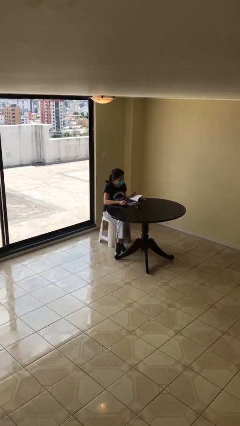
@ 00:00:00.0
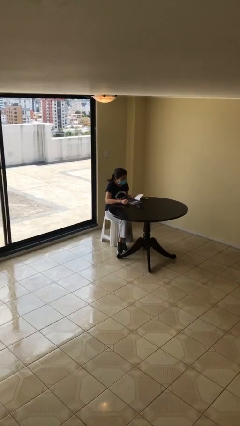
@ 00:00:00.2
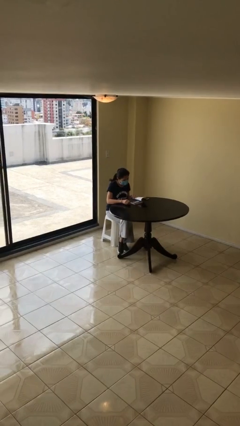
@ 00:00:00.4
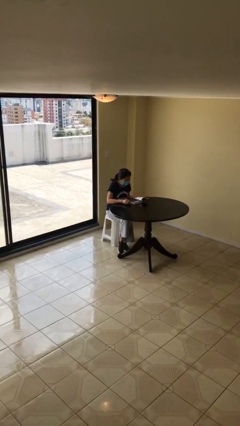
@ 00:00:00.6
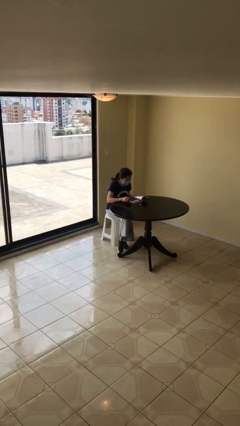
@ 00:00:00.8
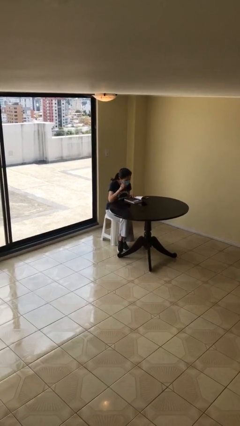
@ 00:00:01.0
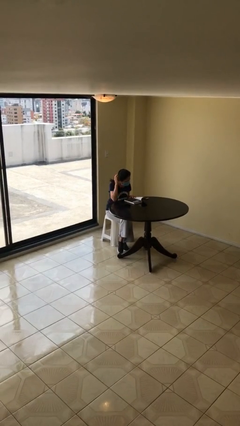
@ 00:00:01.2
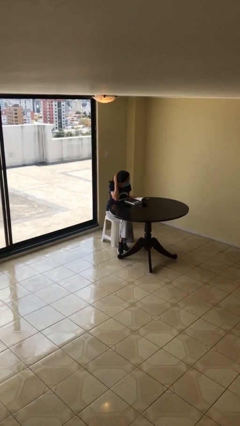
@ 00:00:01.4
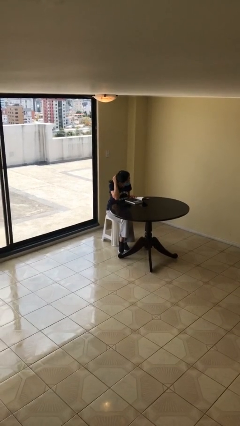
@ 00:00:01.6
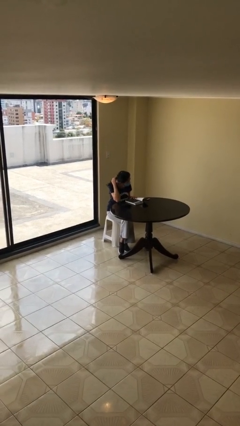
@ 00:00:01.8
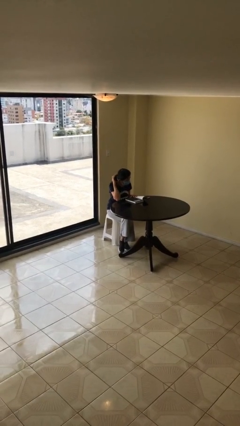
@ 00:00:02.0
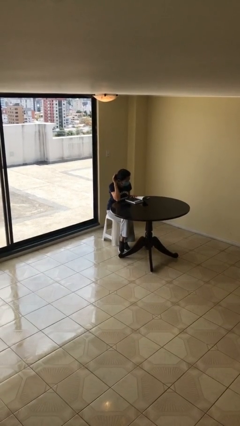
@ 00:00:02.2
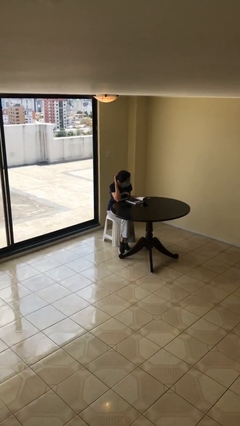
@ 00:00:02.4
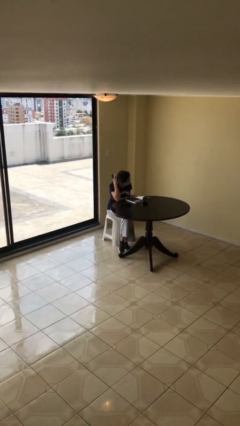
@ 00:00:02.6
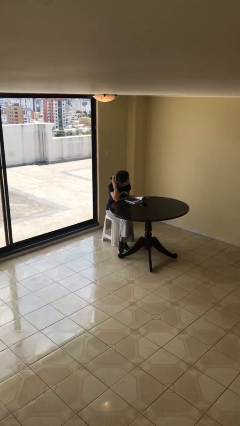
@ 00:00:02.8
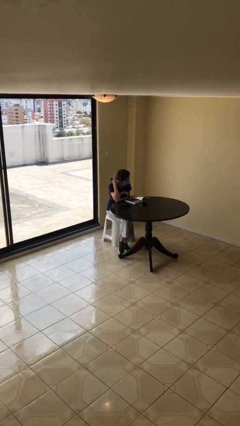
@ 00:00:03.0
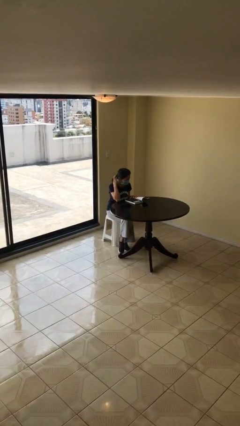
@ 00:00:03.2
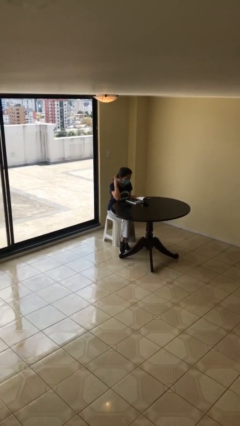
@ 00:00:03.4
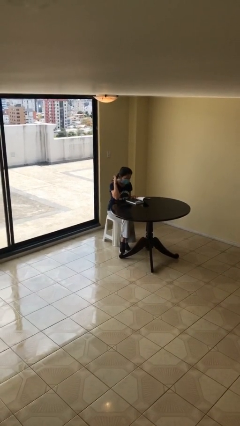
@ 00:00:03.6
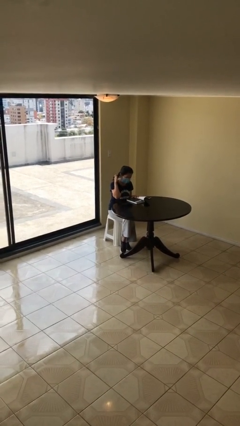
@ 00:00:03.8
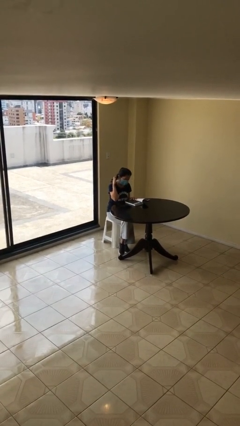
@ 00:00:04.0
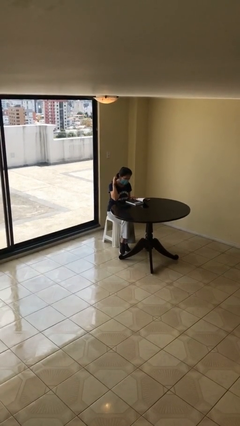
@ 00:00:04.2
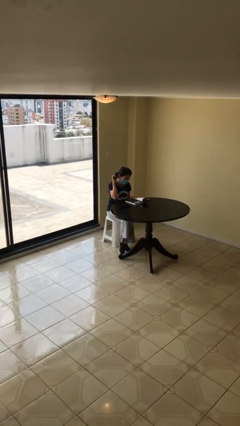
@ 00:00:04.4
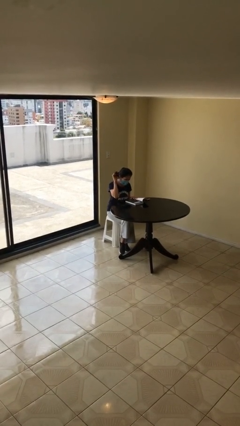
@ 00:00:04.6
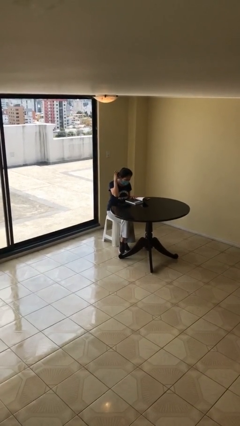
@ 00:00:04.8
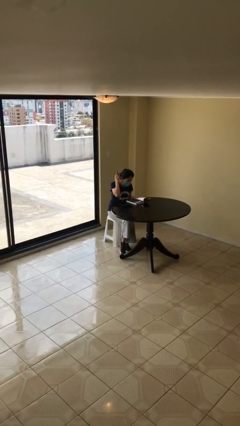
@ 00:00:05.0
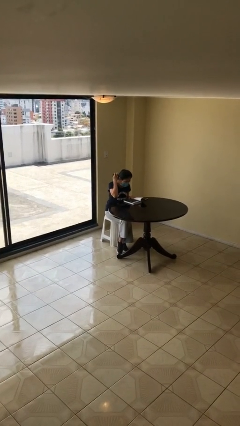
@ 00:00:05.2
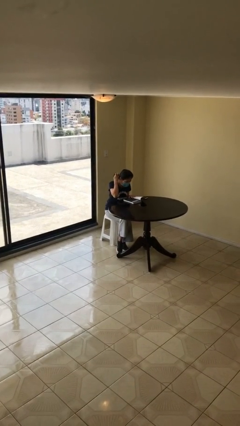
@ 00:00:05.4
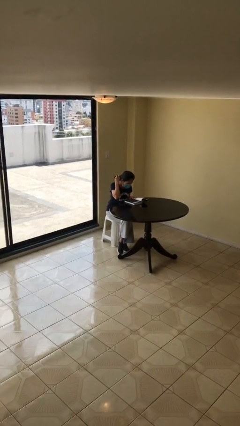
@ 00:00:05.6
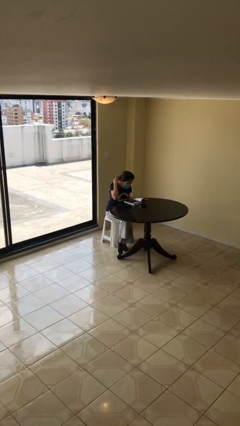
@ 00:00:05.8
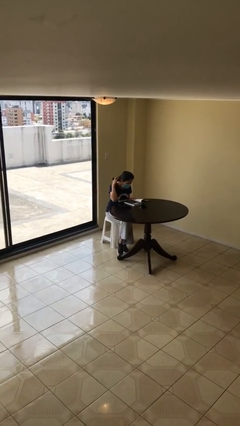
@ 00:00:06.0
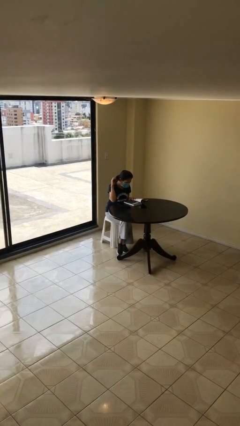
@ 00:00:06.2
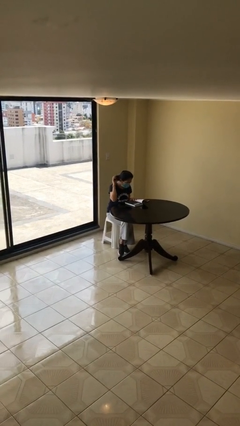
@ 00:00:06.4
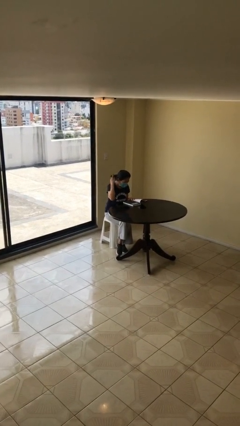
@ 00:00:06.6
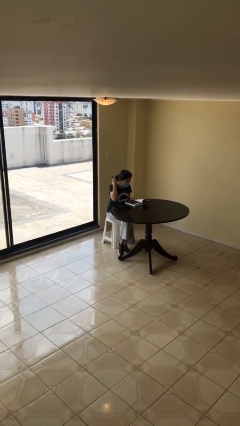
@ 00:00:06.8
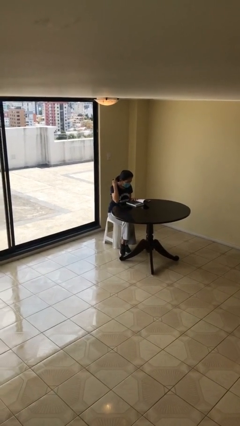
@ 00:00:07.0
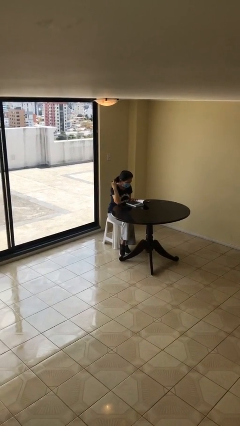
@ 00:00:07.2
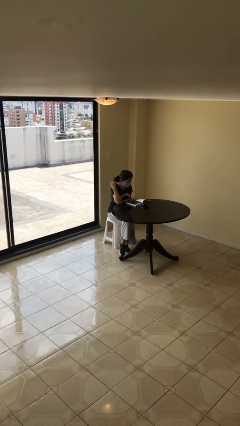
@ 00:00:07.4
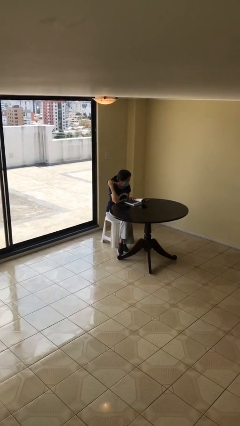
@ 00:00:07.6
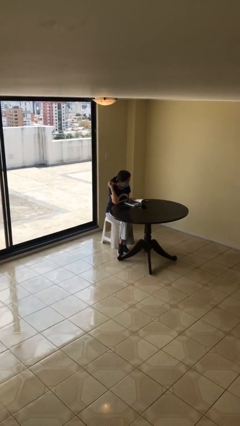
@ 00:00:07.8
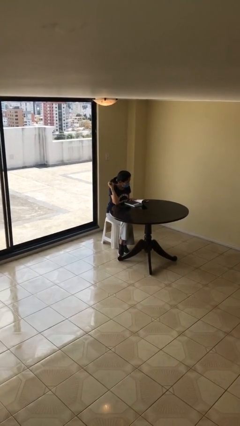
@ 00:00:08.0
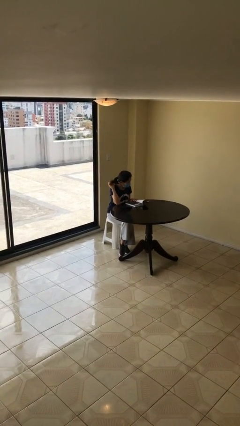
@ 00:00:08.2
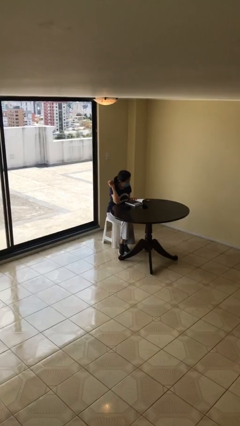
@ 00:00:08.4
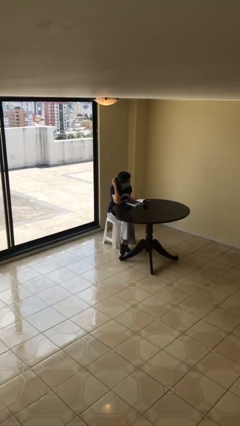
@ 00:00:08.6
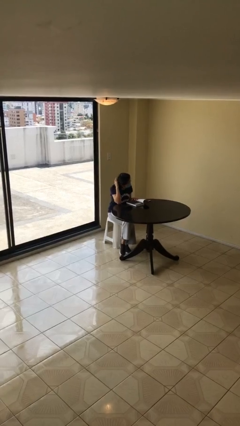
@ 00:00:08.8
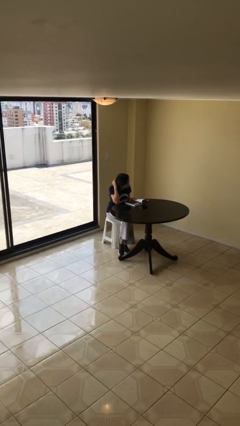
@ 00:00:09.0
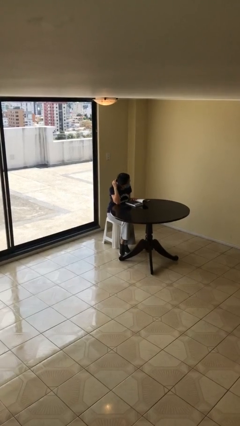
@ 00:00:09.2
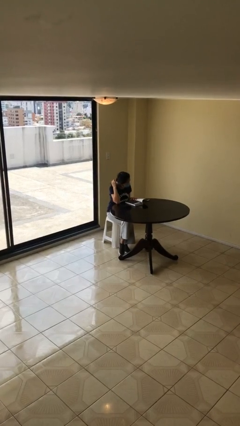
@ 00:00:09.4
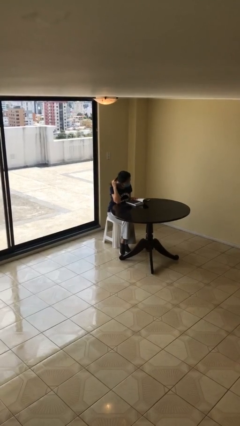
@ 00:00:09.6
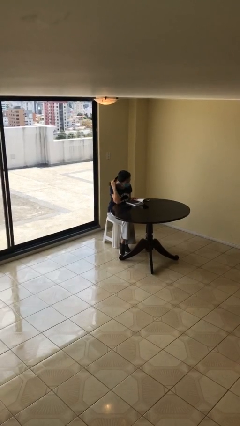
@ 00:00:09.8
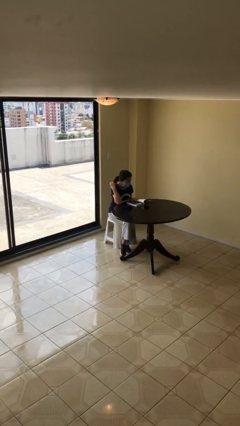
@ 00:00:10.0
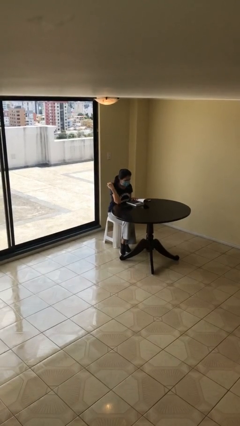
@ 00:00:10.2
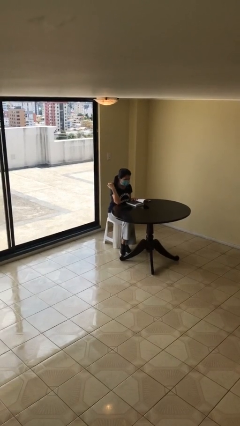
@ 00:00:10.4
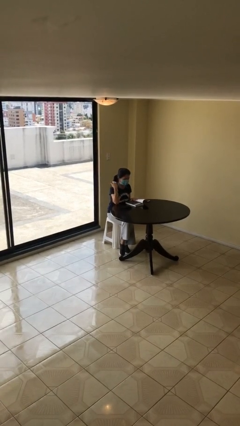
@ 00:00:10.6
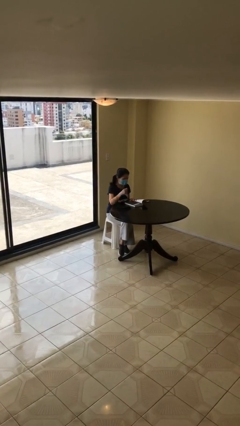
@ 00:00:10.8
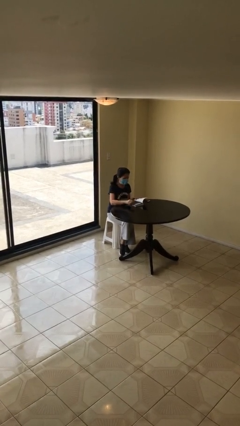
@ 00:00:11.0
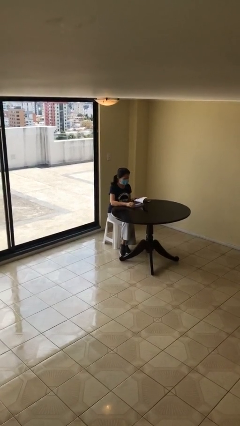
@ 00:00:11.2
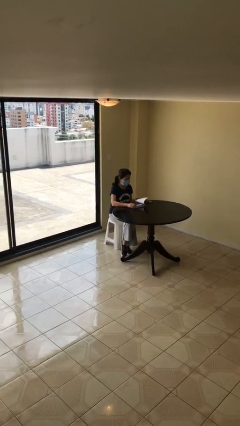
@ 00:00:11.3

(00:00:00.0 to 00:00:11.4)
person reads document

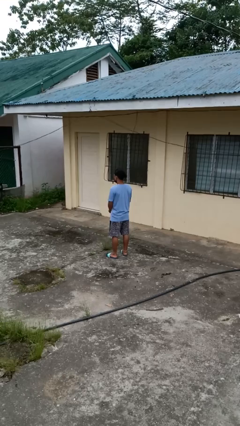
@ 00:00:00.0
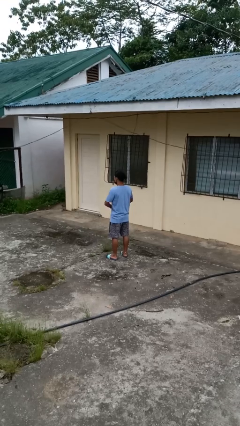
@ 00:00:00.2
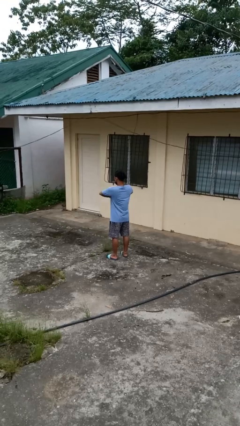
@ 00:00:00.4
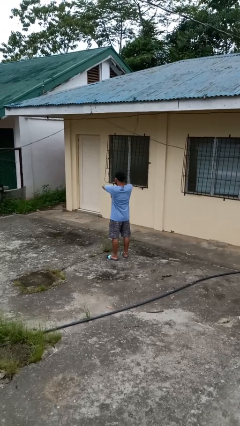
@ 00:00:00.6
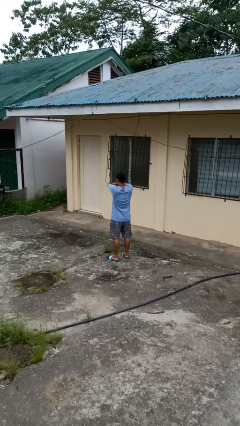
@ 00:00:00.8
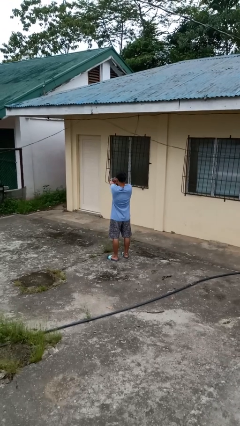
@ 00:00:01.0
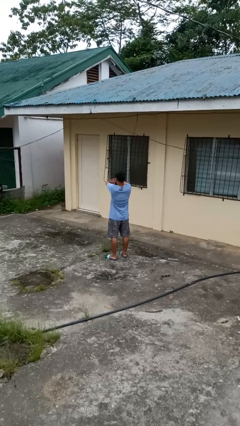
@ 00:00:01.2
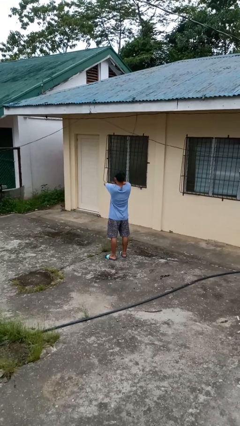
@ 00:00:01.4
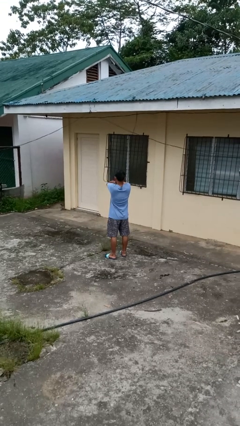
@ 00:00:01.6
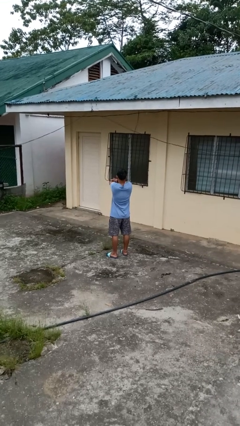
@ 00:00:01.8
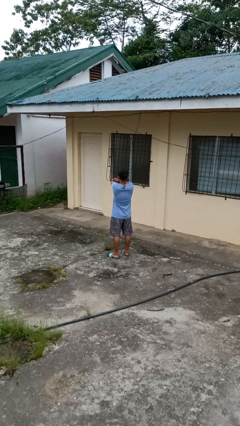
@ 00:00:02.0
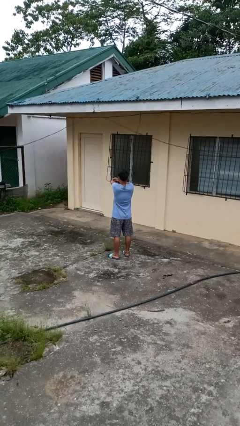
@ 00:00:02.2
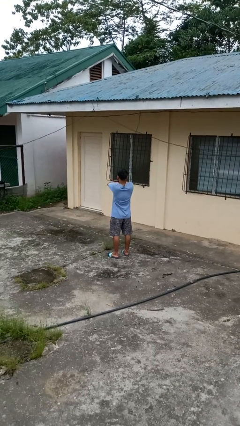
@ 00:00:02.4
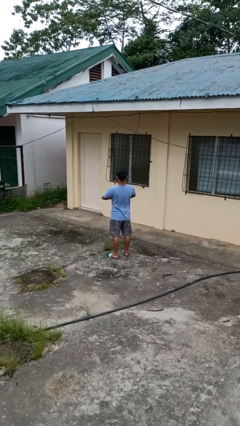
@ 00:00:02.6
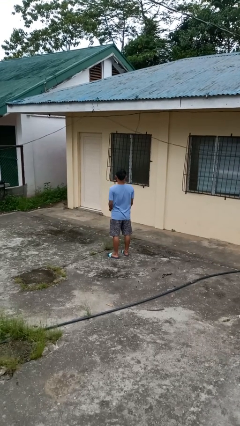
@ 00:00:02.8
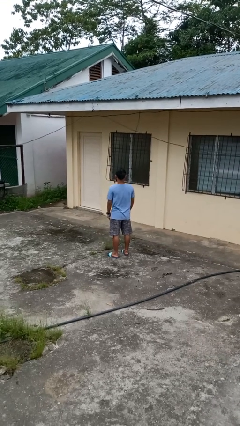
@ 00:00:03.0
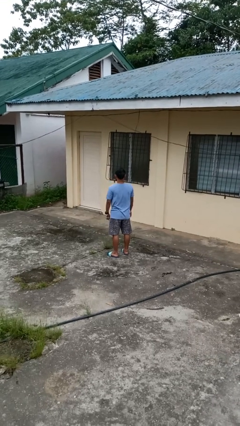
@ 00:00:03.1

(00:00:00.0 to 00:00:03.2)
person cracks knuckles

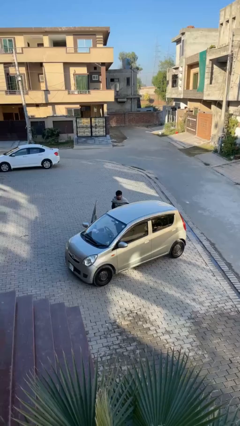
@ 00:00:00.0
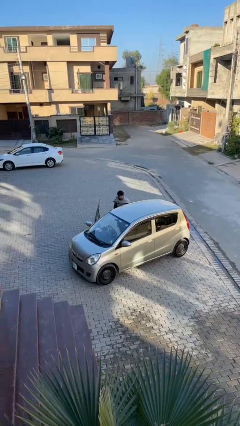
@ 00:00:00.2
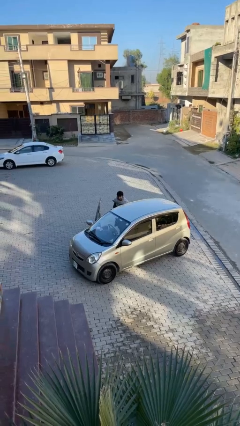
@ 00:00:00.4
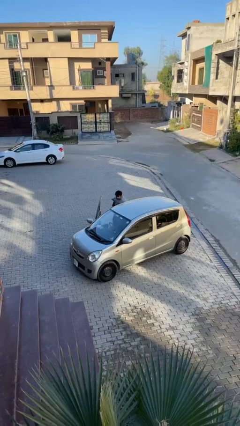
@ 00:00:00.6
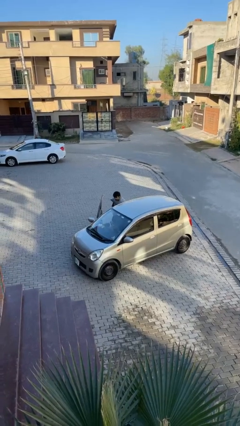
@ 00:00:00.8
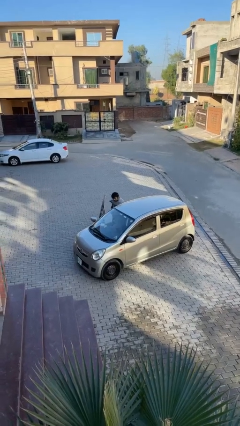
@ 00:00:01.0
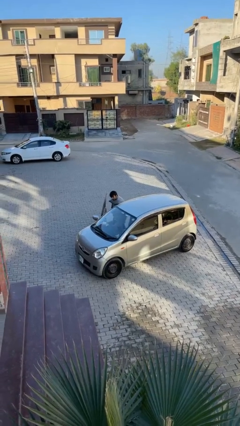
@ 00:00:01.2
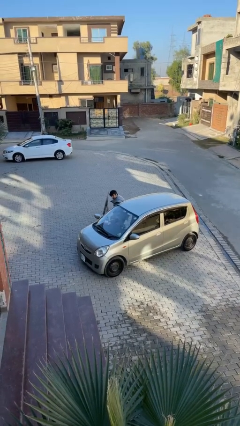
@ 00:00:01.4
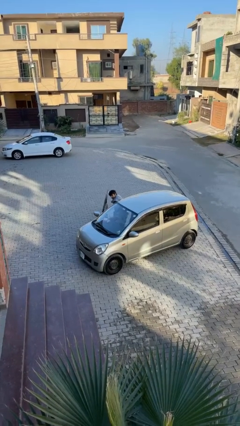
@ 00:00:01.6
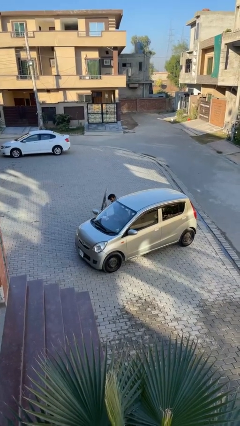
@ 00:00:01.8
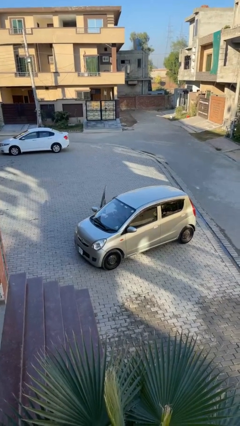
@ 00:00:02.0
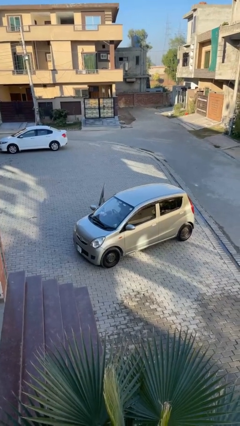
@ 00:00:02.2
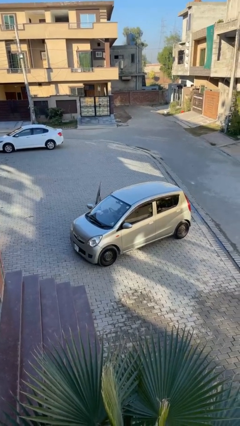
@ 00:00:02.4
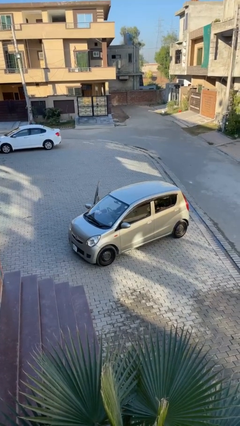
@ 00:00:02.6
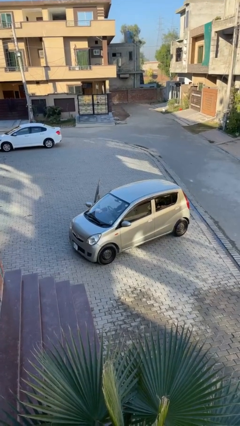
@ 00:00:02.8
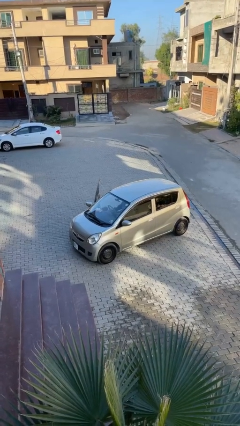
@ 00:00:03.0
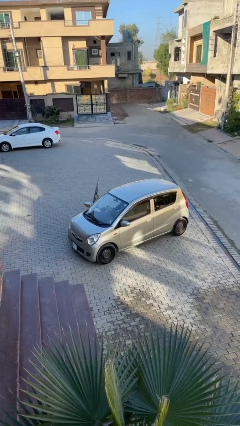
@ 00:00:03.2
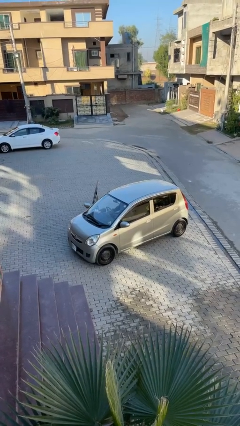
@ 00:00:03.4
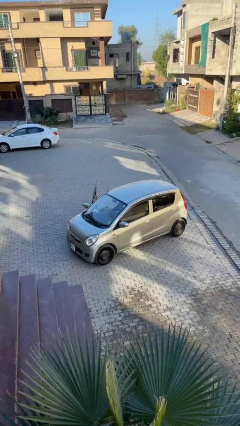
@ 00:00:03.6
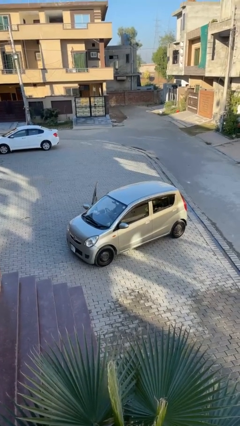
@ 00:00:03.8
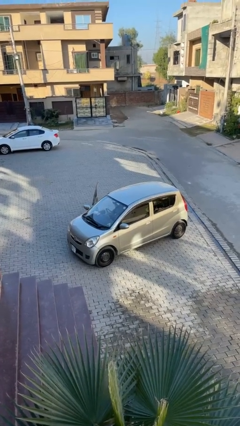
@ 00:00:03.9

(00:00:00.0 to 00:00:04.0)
person enters car
